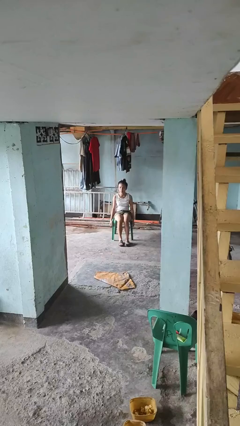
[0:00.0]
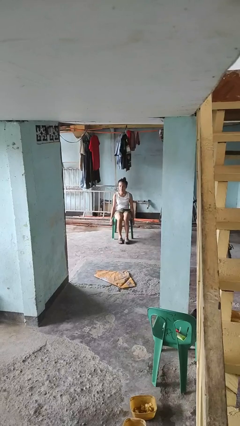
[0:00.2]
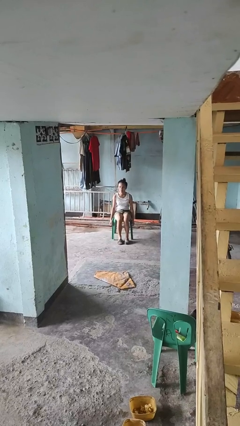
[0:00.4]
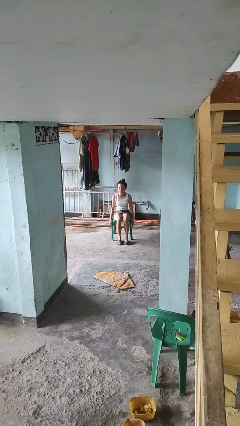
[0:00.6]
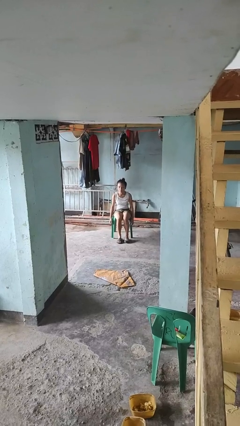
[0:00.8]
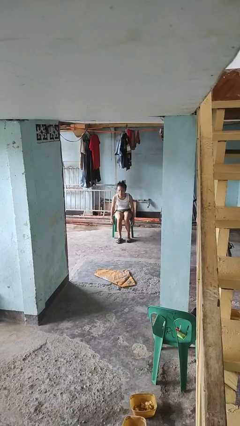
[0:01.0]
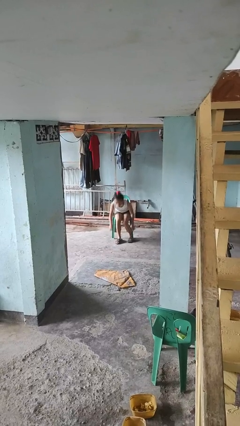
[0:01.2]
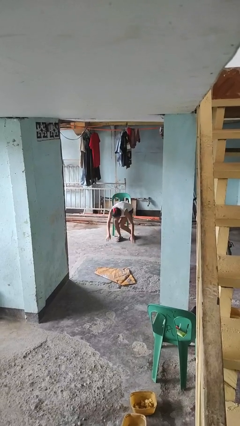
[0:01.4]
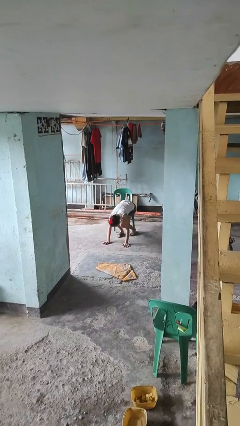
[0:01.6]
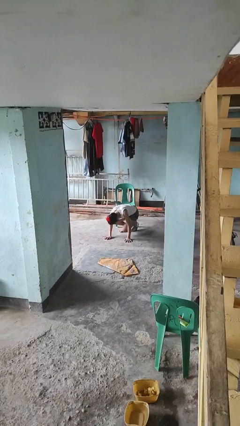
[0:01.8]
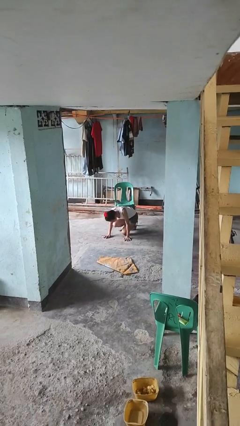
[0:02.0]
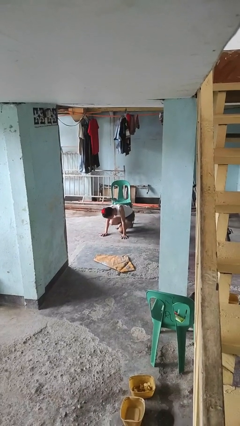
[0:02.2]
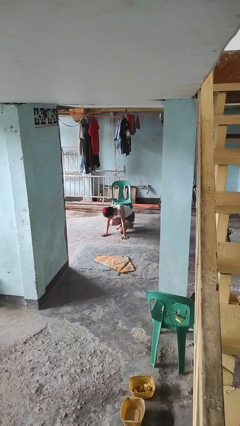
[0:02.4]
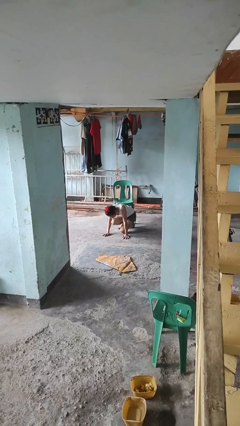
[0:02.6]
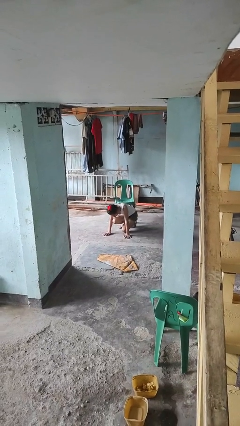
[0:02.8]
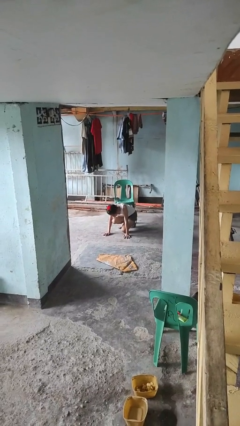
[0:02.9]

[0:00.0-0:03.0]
person falls from chair

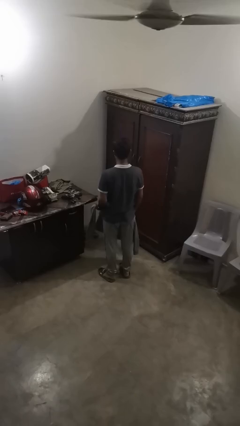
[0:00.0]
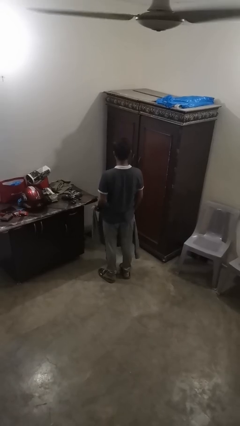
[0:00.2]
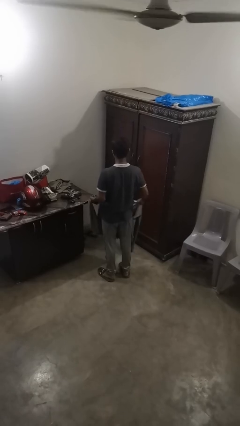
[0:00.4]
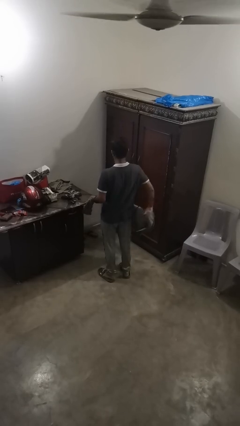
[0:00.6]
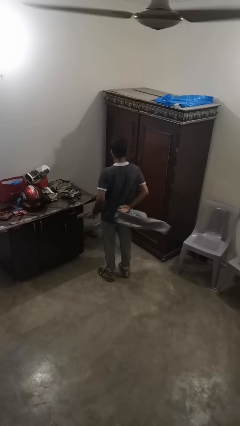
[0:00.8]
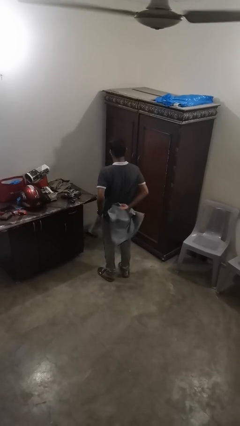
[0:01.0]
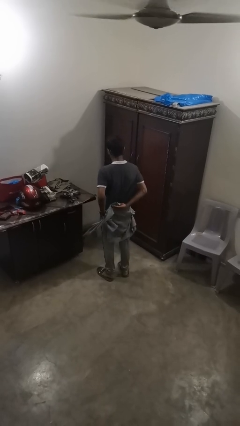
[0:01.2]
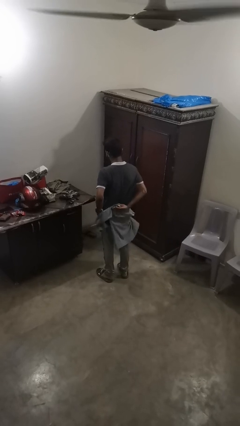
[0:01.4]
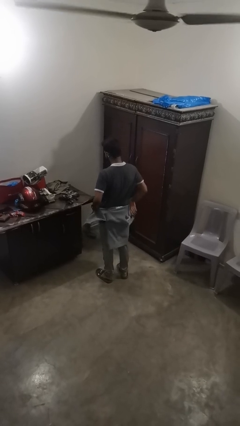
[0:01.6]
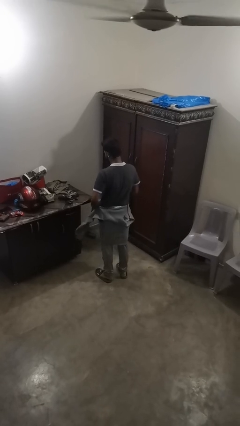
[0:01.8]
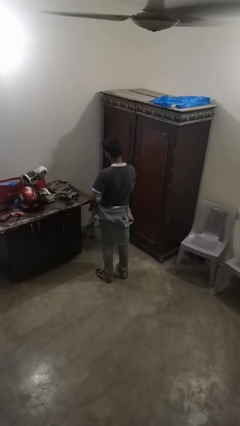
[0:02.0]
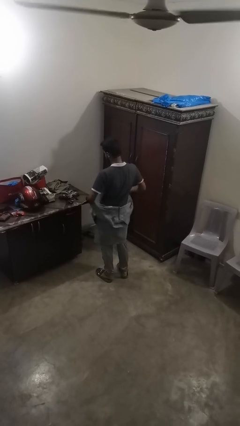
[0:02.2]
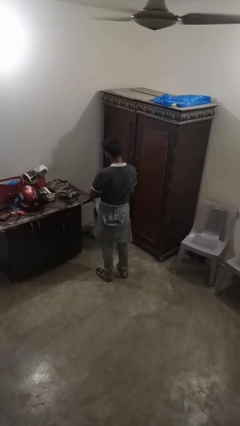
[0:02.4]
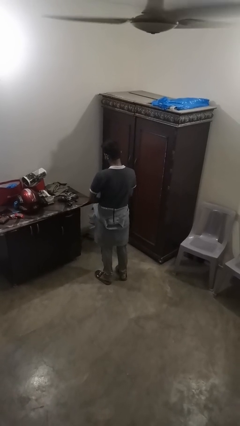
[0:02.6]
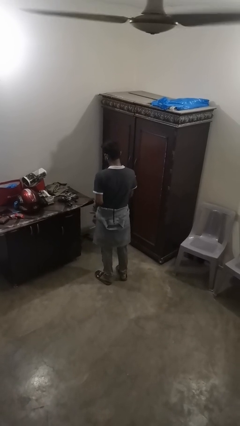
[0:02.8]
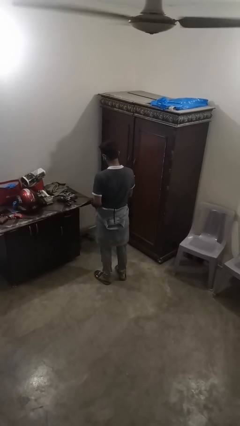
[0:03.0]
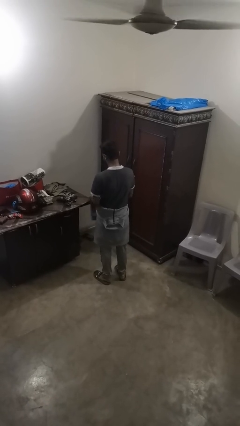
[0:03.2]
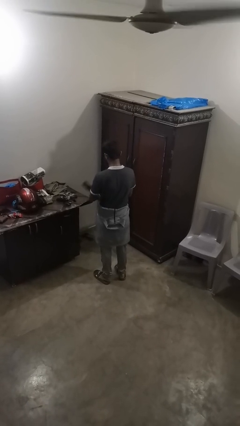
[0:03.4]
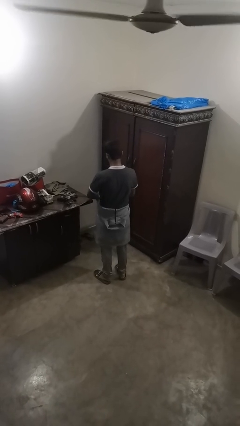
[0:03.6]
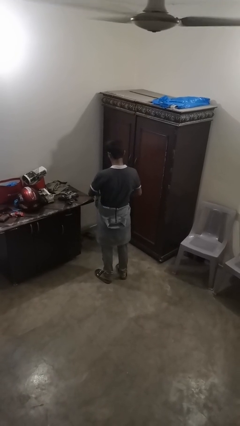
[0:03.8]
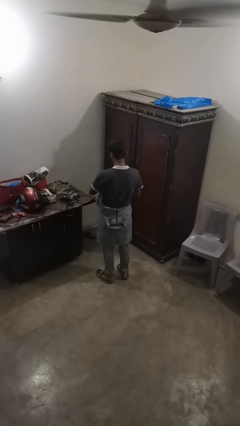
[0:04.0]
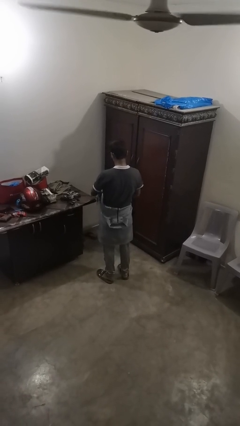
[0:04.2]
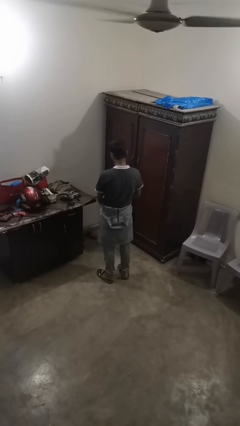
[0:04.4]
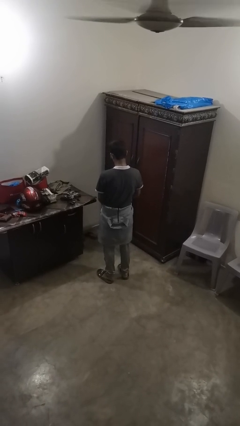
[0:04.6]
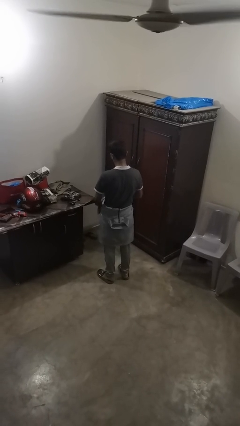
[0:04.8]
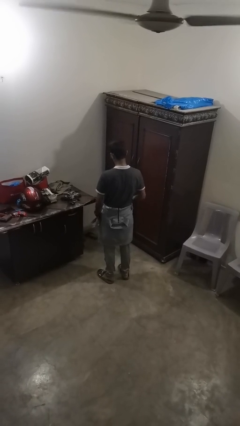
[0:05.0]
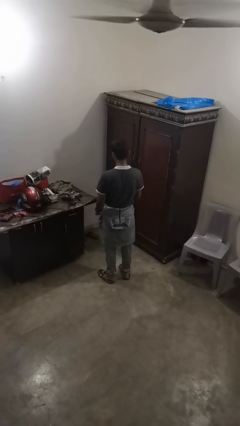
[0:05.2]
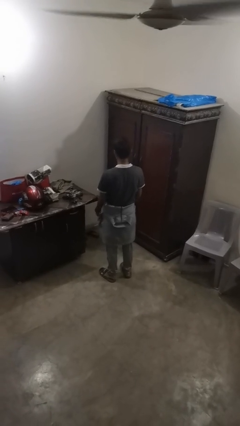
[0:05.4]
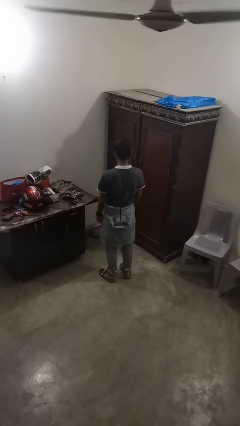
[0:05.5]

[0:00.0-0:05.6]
person ties jacket around waist

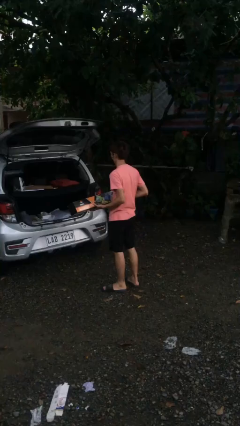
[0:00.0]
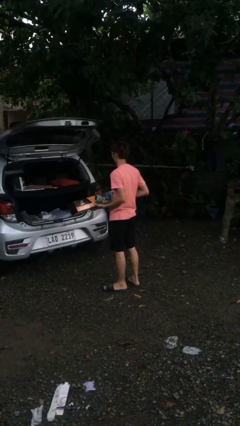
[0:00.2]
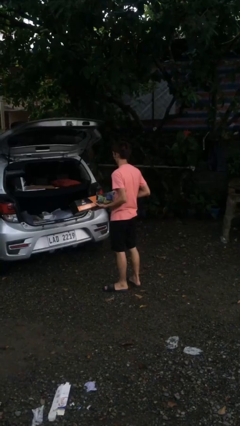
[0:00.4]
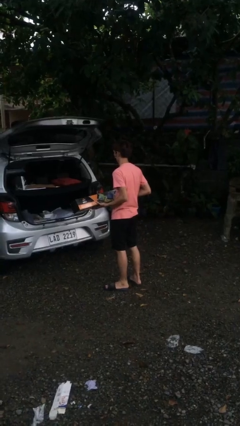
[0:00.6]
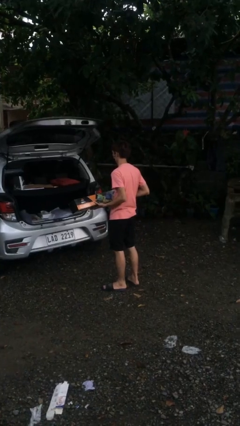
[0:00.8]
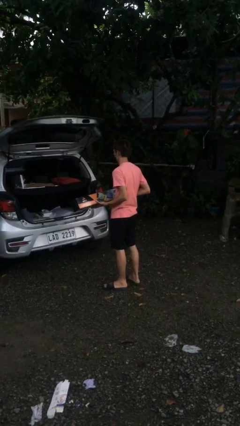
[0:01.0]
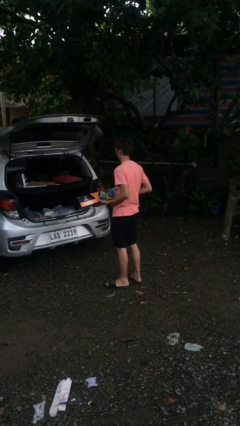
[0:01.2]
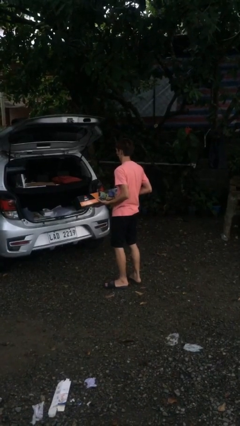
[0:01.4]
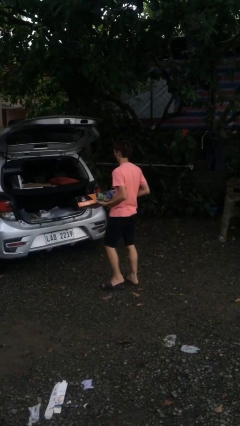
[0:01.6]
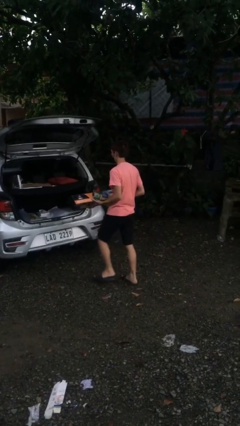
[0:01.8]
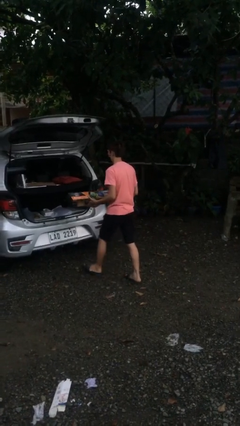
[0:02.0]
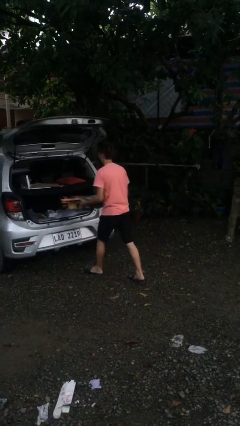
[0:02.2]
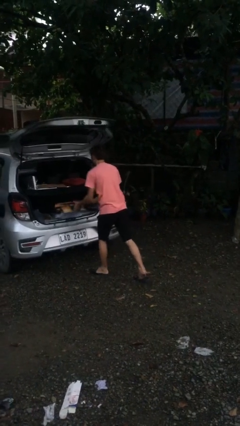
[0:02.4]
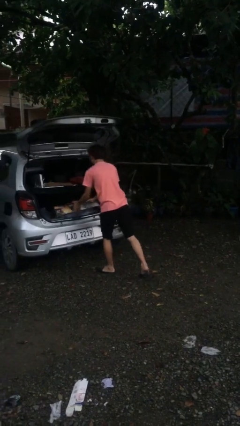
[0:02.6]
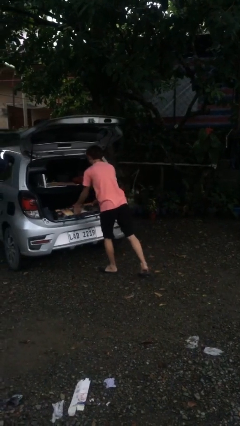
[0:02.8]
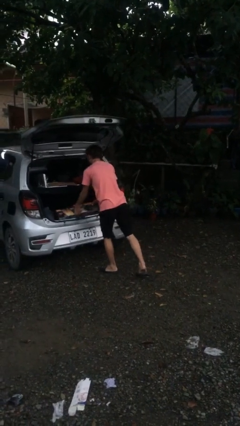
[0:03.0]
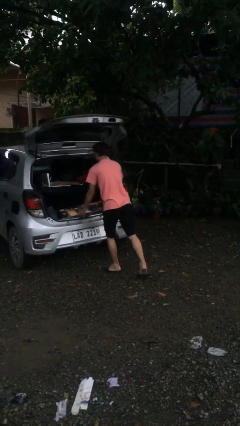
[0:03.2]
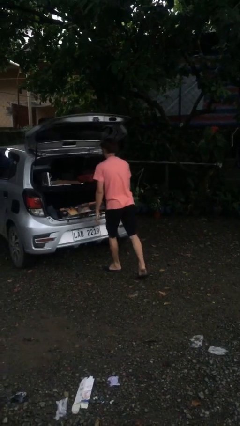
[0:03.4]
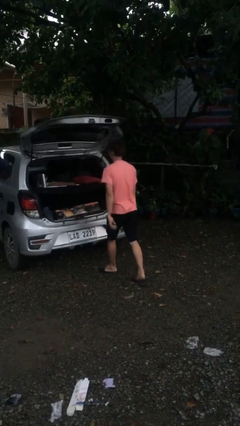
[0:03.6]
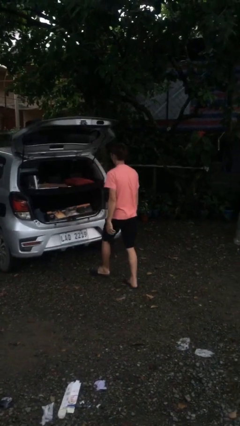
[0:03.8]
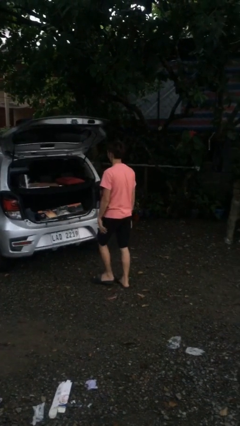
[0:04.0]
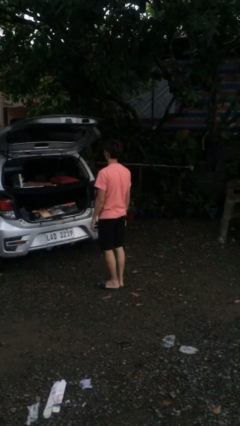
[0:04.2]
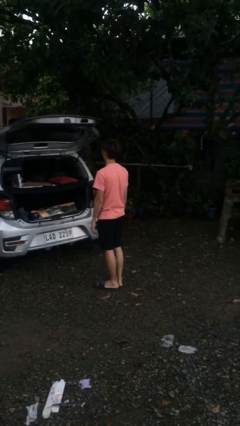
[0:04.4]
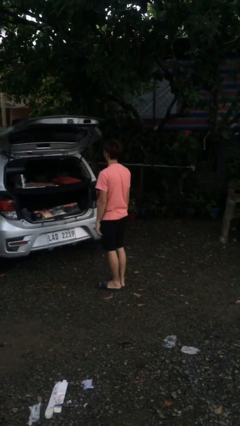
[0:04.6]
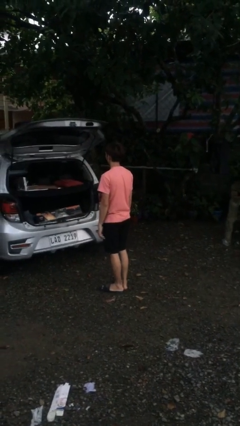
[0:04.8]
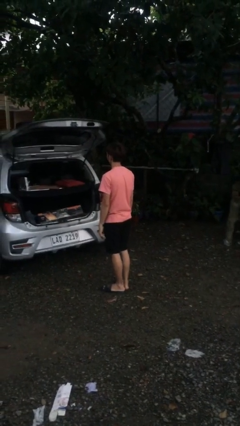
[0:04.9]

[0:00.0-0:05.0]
person loads car

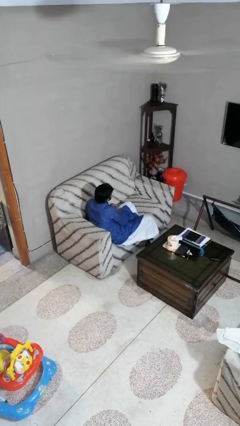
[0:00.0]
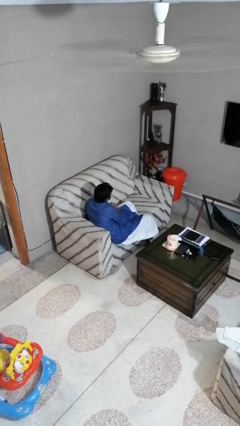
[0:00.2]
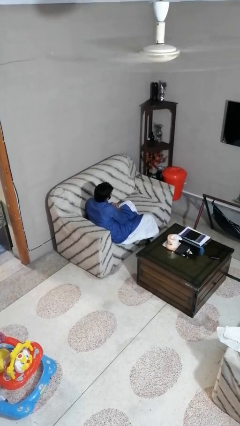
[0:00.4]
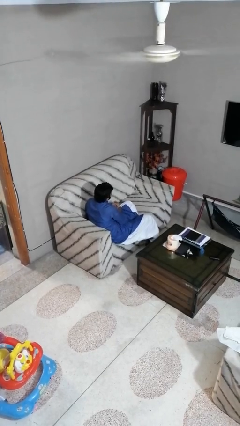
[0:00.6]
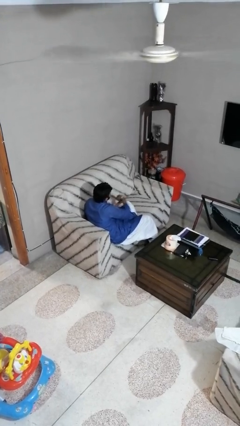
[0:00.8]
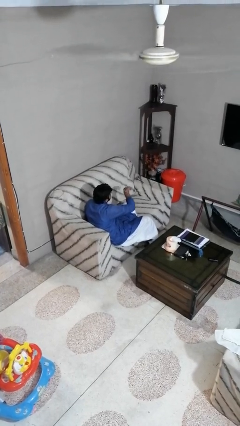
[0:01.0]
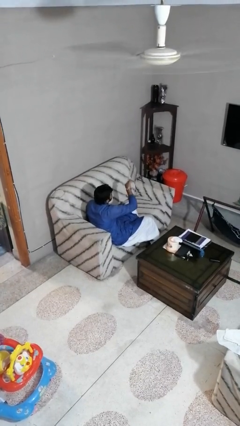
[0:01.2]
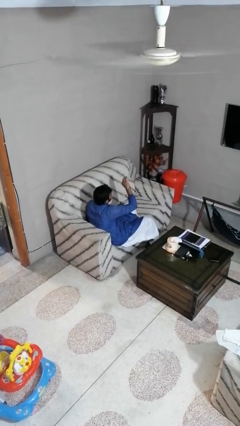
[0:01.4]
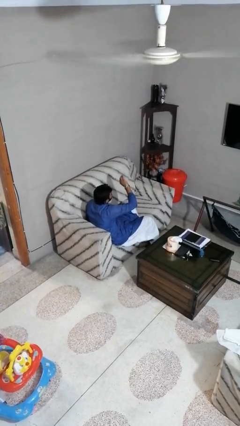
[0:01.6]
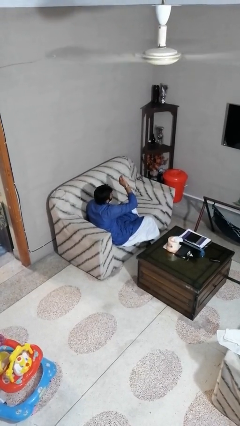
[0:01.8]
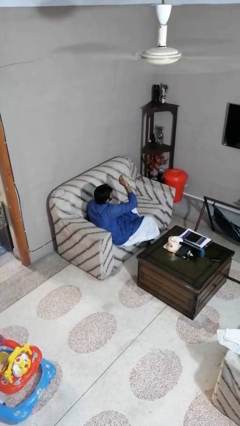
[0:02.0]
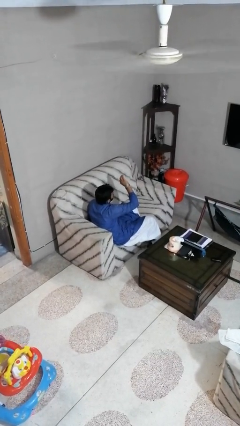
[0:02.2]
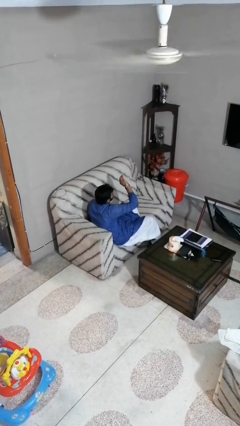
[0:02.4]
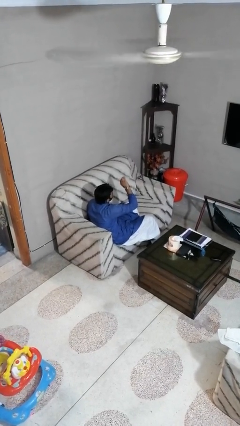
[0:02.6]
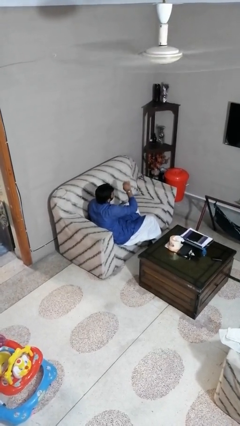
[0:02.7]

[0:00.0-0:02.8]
person looks at wristwatch

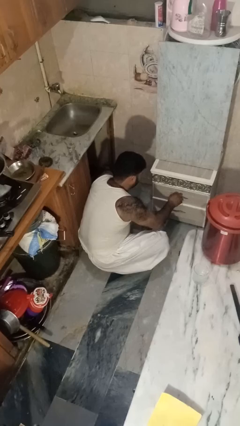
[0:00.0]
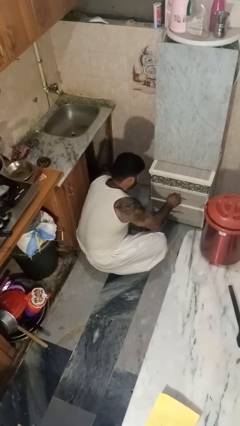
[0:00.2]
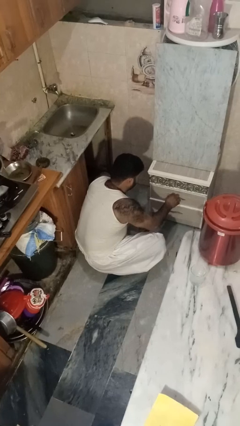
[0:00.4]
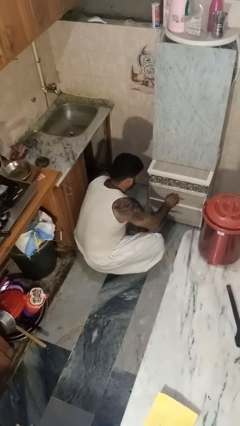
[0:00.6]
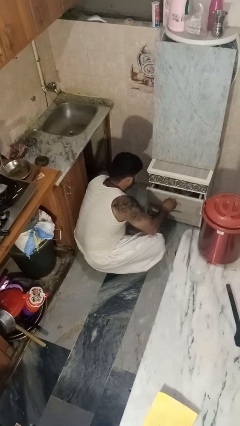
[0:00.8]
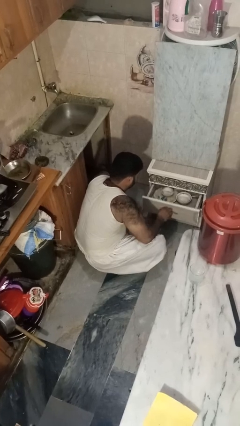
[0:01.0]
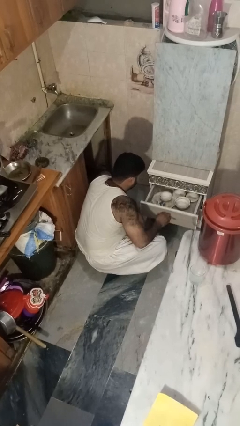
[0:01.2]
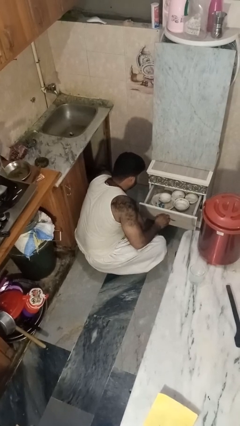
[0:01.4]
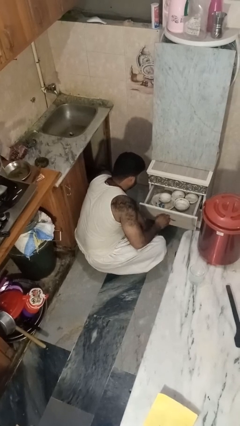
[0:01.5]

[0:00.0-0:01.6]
person opens kitchen drawer
